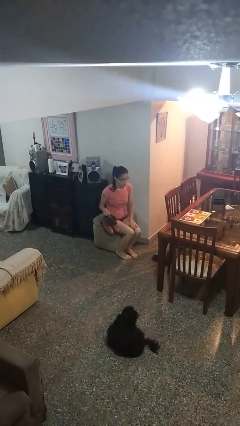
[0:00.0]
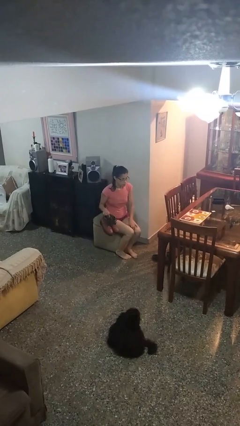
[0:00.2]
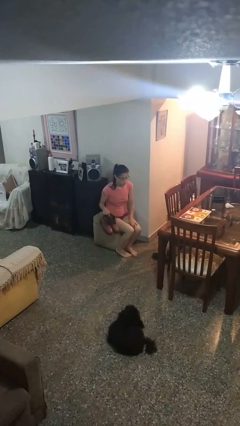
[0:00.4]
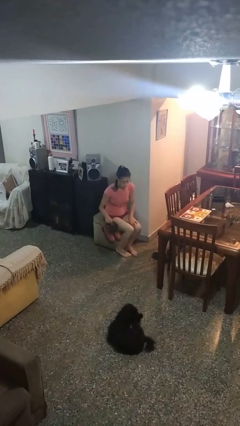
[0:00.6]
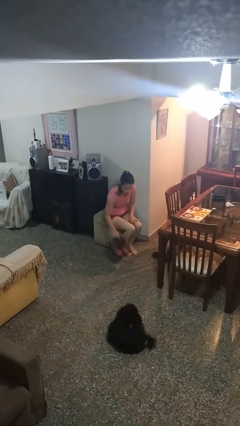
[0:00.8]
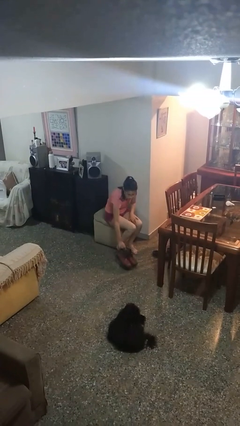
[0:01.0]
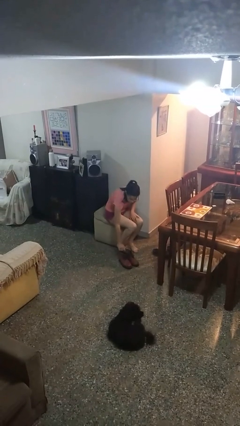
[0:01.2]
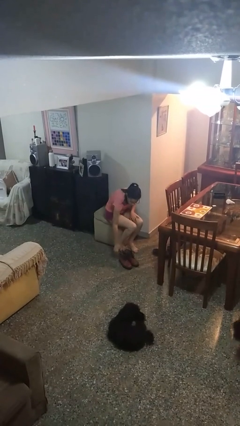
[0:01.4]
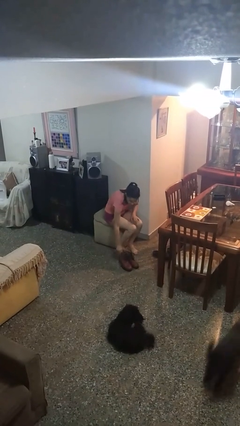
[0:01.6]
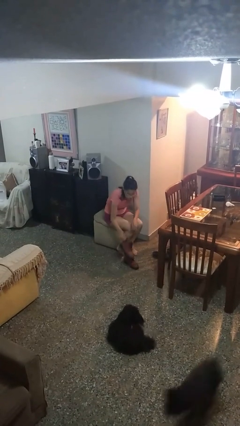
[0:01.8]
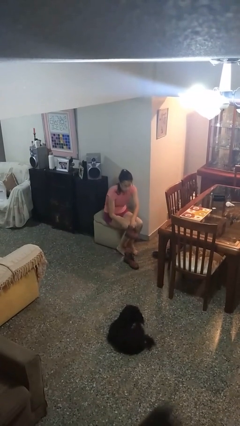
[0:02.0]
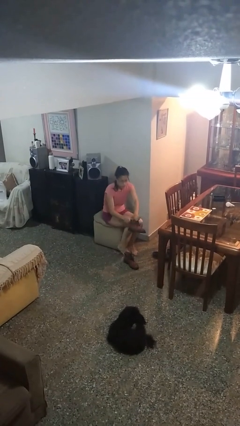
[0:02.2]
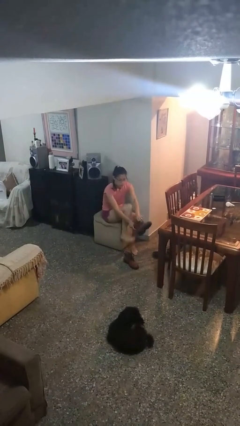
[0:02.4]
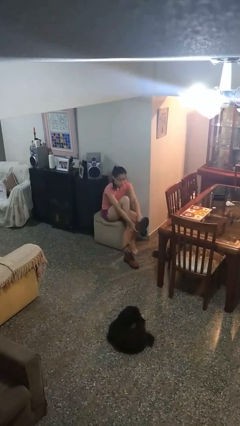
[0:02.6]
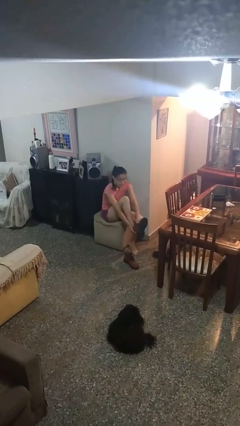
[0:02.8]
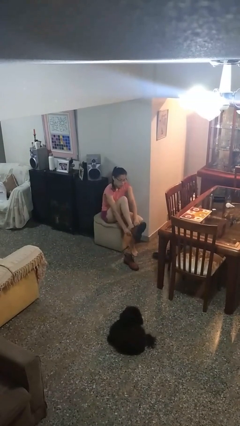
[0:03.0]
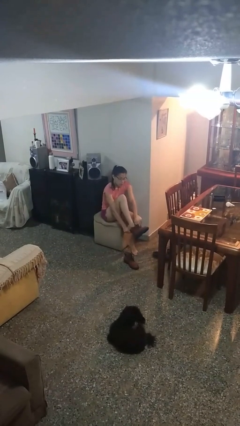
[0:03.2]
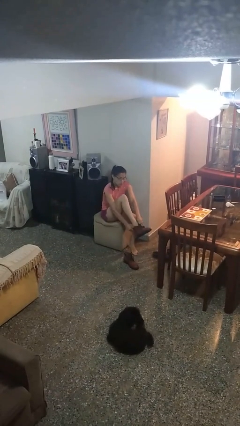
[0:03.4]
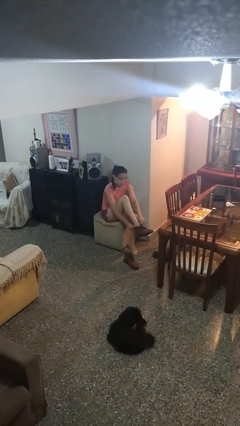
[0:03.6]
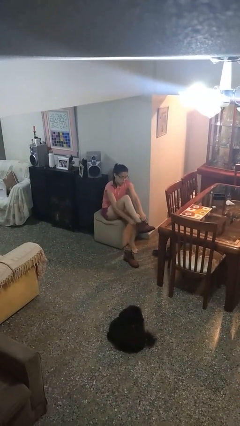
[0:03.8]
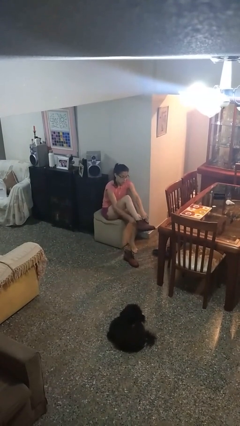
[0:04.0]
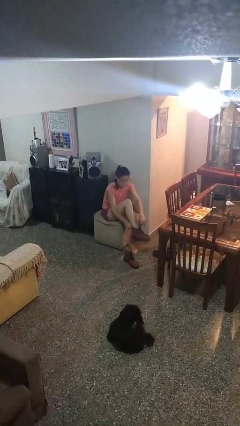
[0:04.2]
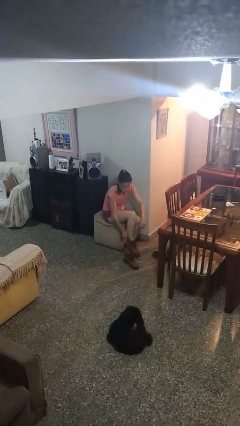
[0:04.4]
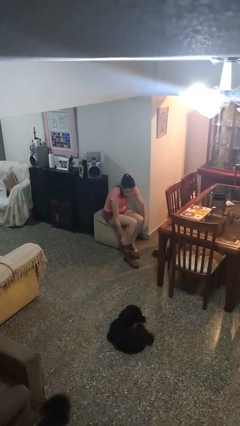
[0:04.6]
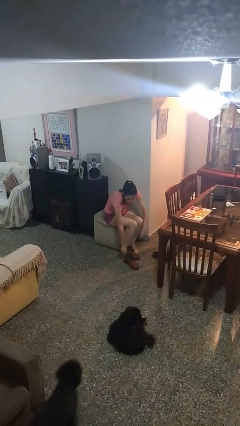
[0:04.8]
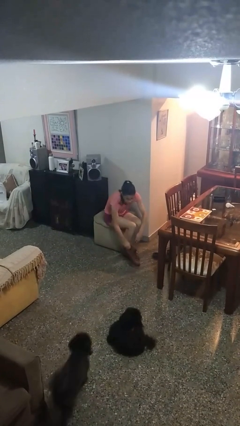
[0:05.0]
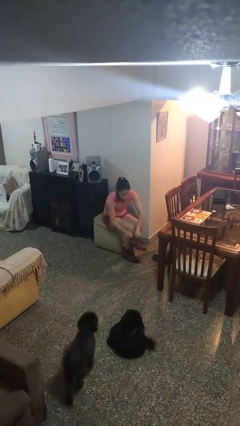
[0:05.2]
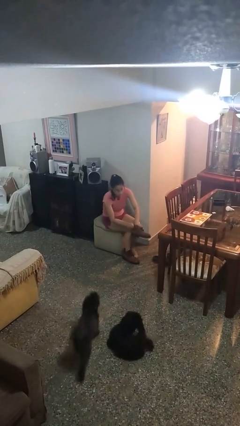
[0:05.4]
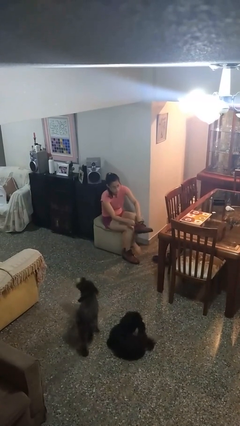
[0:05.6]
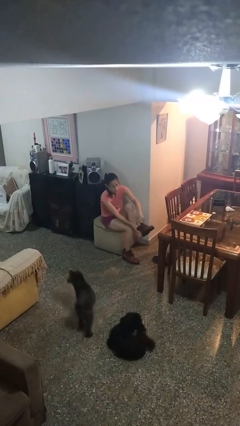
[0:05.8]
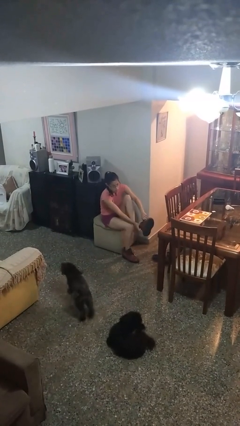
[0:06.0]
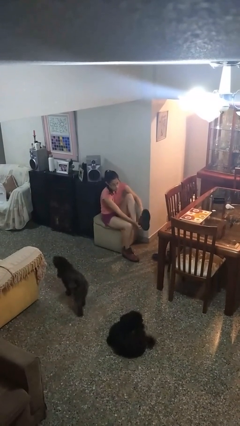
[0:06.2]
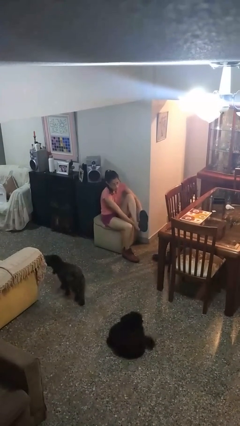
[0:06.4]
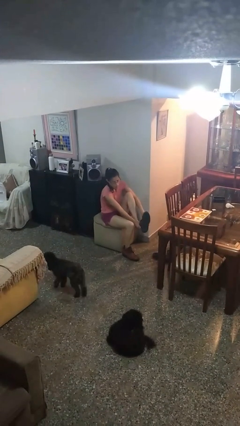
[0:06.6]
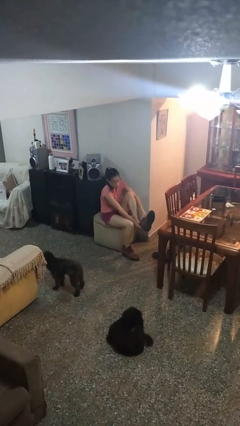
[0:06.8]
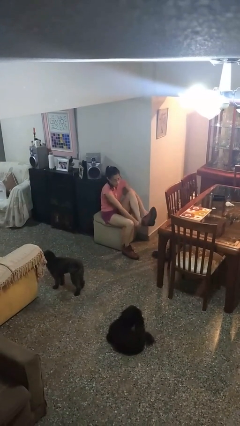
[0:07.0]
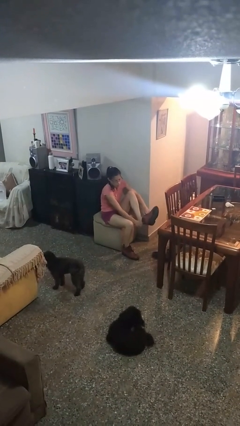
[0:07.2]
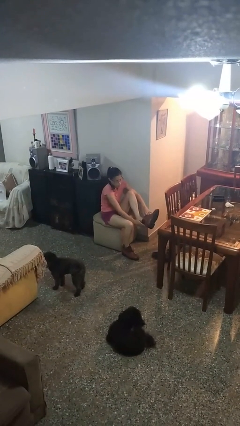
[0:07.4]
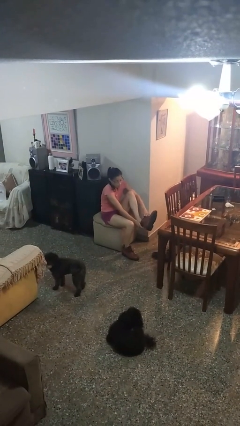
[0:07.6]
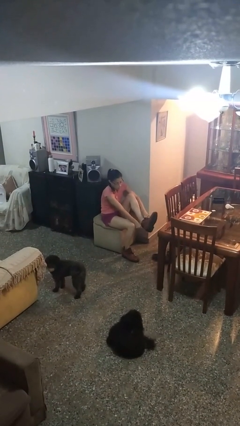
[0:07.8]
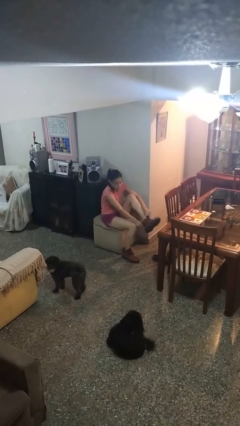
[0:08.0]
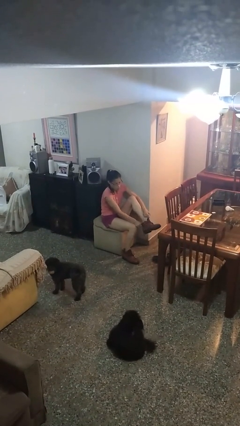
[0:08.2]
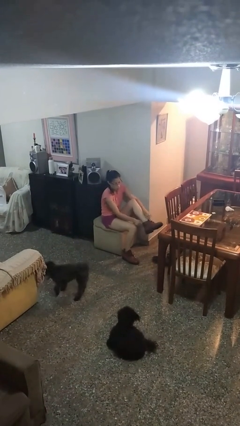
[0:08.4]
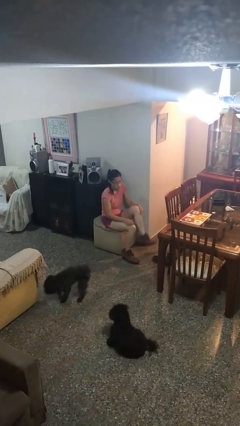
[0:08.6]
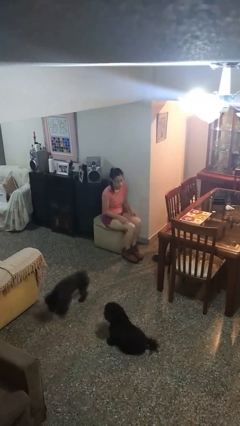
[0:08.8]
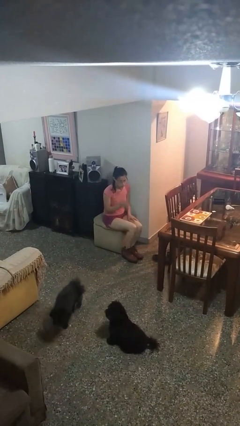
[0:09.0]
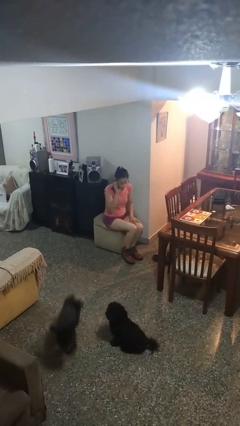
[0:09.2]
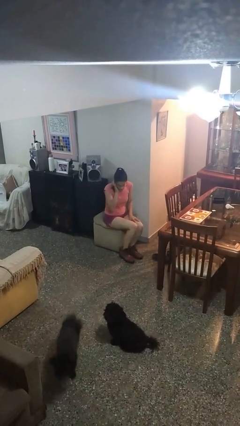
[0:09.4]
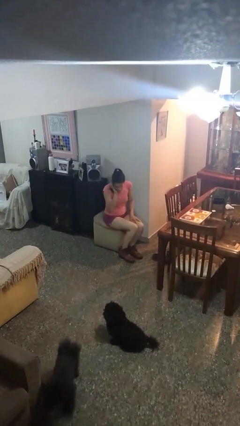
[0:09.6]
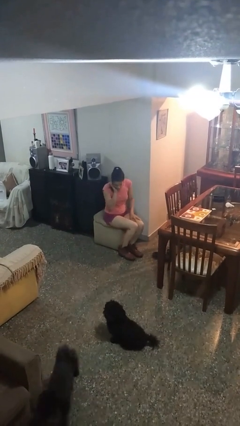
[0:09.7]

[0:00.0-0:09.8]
person puts on boots

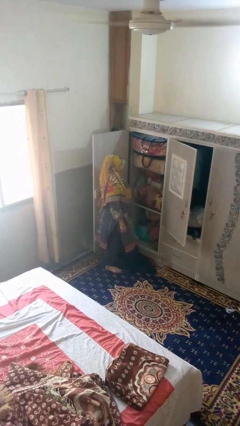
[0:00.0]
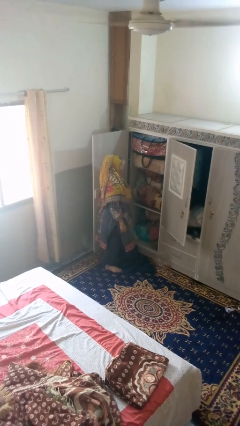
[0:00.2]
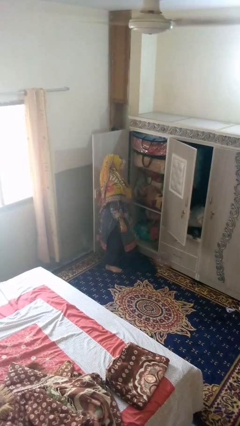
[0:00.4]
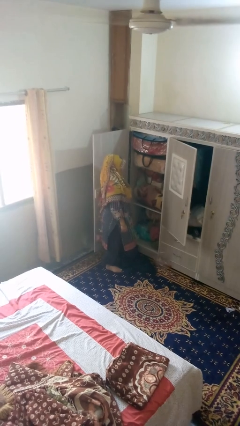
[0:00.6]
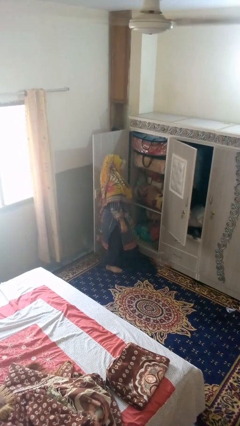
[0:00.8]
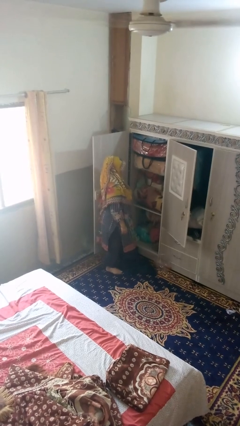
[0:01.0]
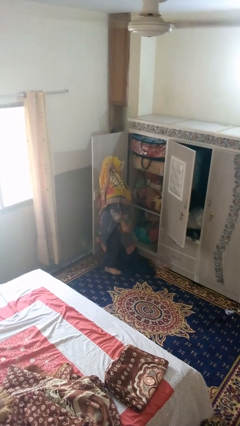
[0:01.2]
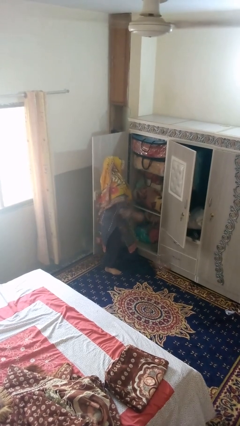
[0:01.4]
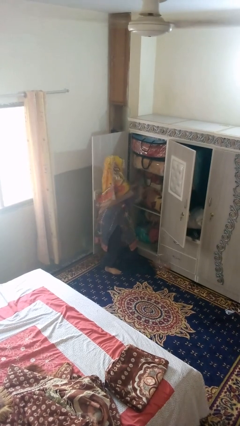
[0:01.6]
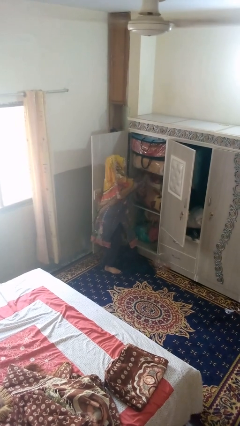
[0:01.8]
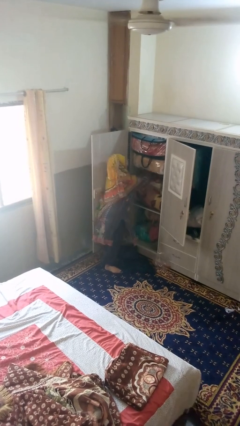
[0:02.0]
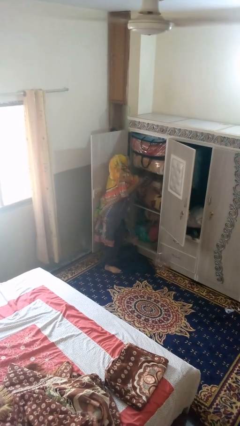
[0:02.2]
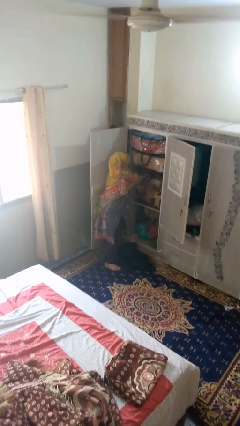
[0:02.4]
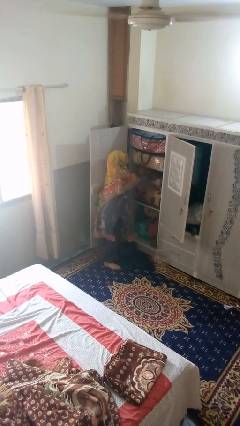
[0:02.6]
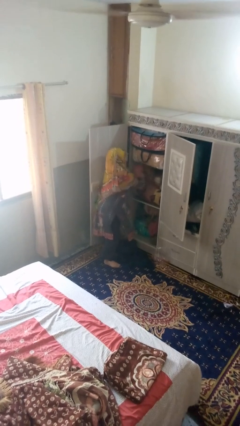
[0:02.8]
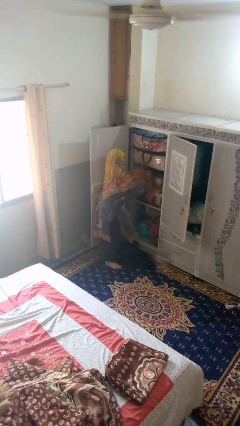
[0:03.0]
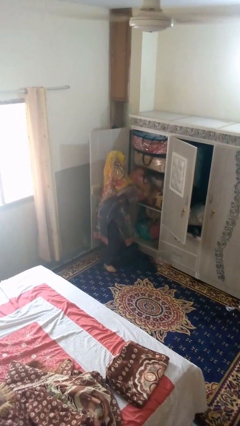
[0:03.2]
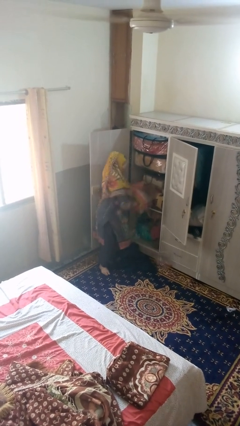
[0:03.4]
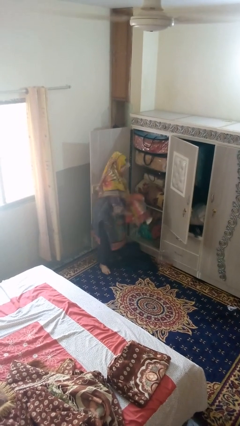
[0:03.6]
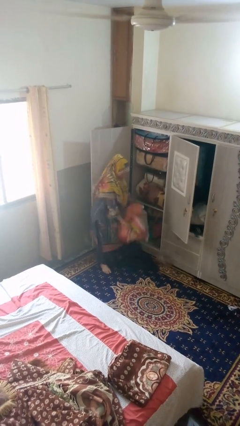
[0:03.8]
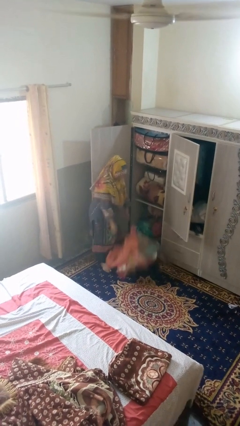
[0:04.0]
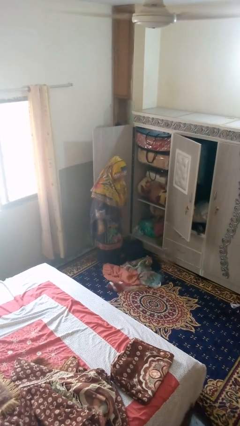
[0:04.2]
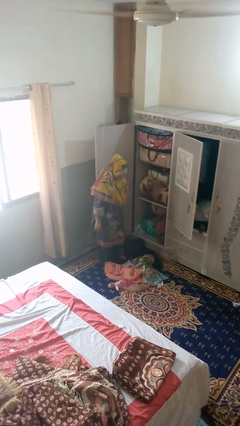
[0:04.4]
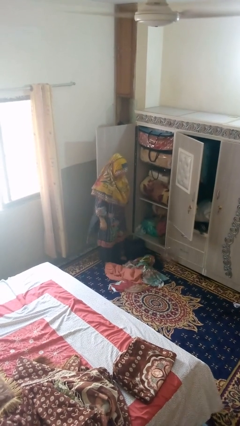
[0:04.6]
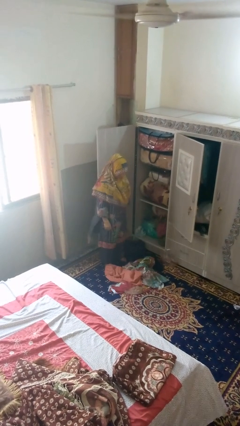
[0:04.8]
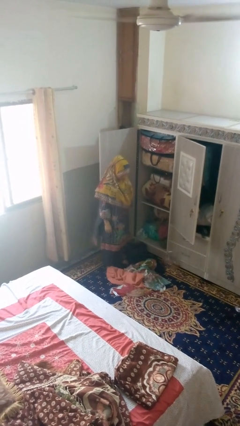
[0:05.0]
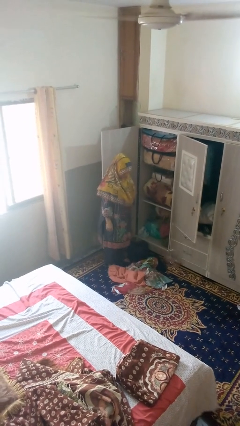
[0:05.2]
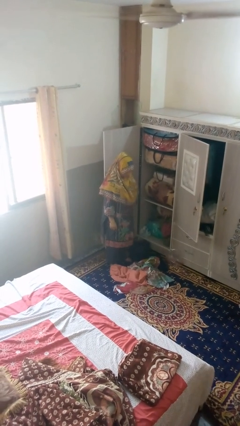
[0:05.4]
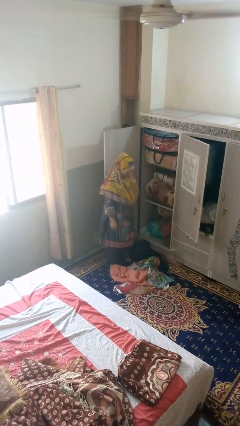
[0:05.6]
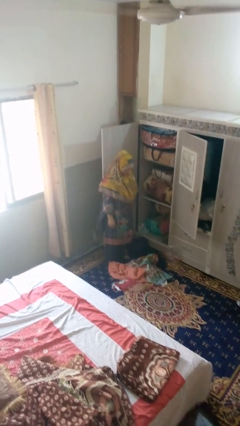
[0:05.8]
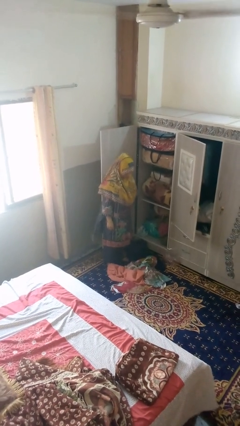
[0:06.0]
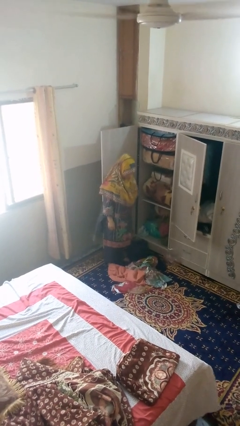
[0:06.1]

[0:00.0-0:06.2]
person puts clothes into dresser

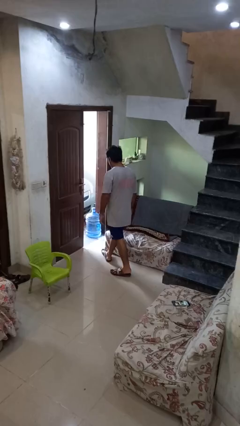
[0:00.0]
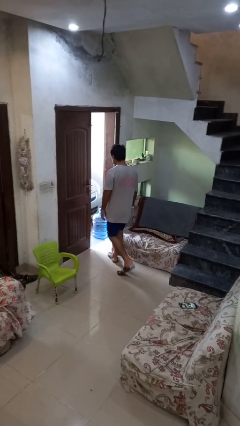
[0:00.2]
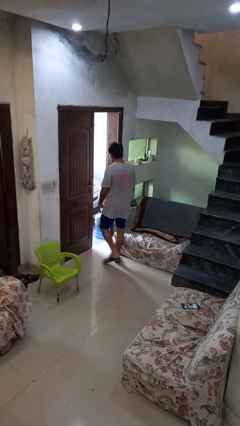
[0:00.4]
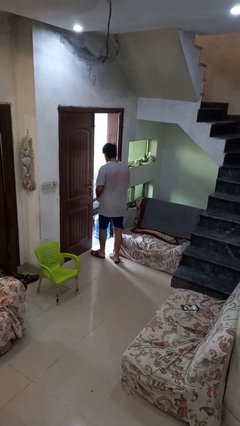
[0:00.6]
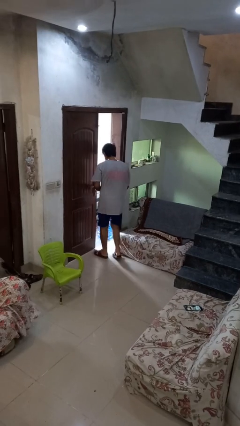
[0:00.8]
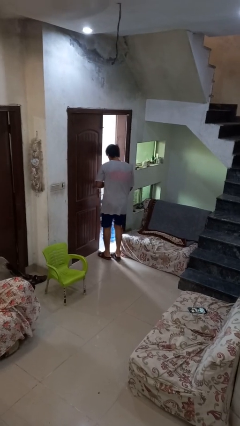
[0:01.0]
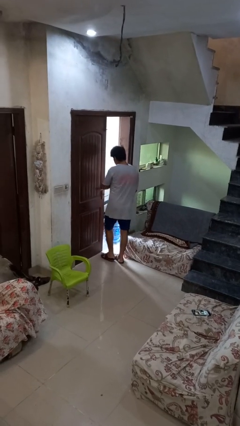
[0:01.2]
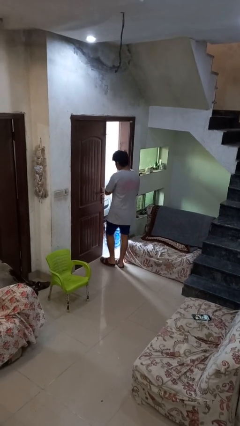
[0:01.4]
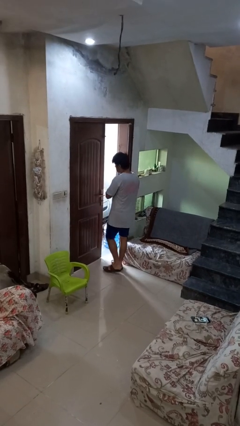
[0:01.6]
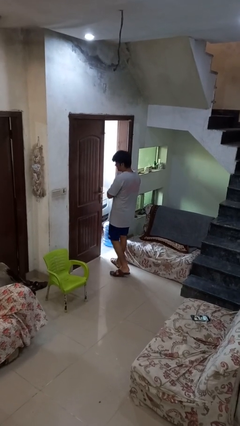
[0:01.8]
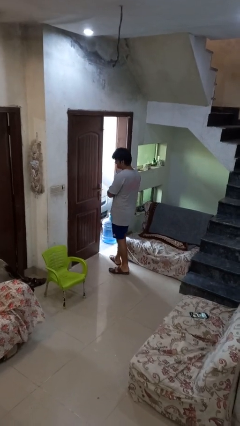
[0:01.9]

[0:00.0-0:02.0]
person bumps into wall
